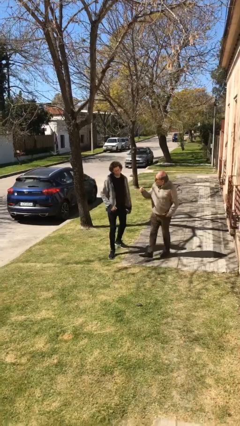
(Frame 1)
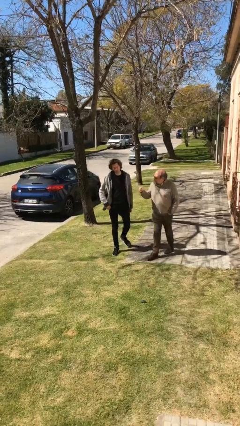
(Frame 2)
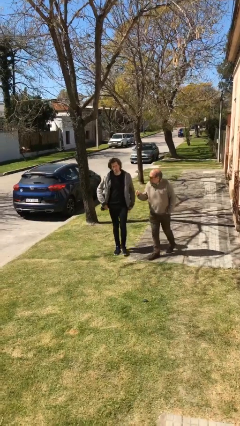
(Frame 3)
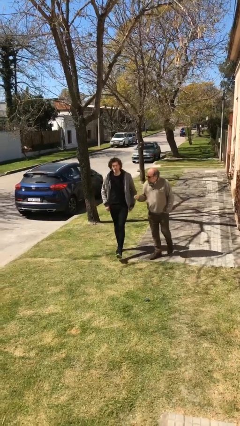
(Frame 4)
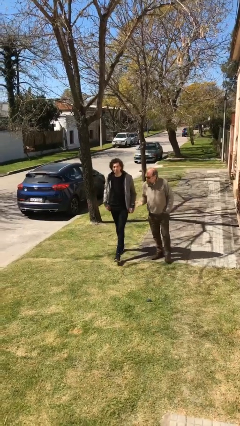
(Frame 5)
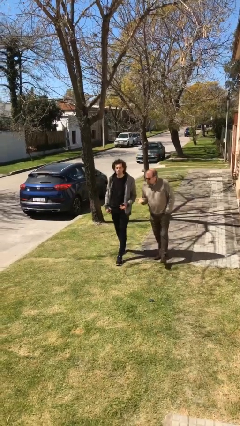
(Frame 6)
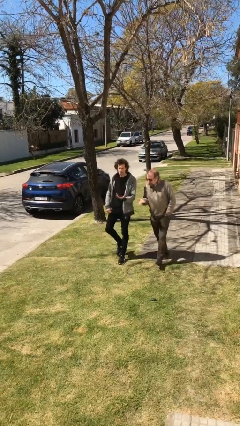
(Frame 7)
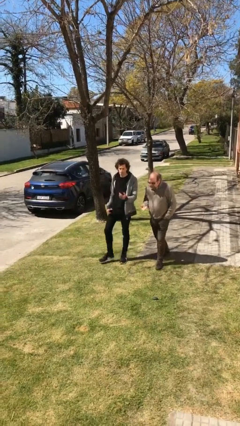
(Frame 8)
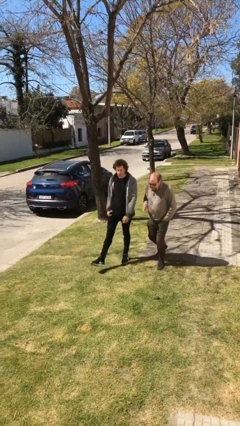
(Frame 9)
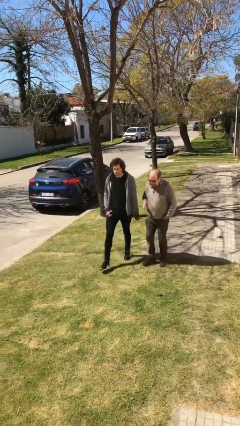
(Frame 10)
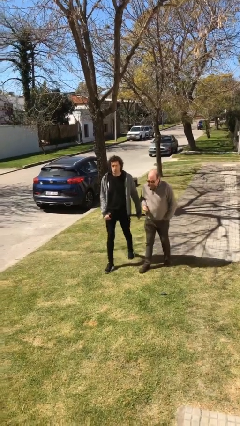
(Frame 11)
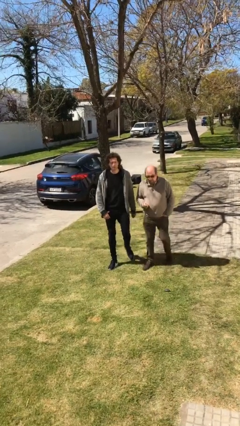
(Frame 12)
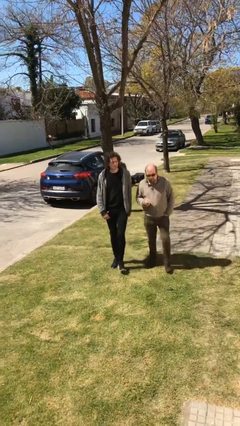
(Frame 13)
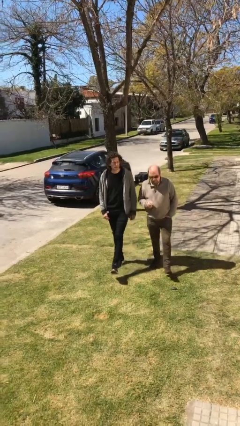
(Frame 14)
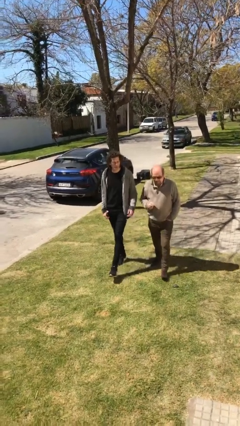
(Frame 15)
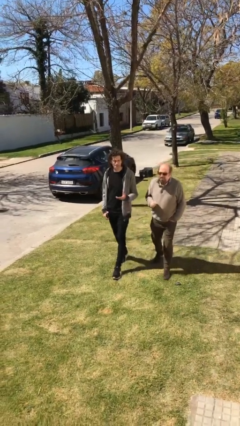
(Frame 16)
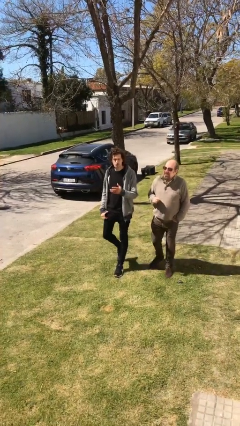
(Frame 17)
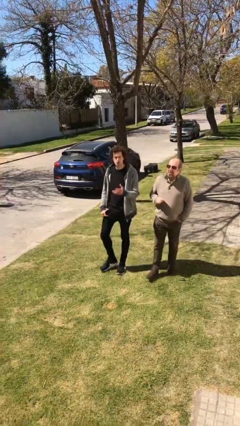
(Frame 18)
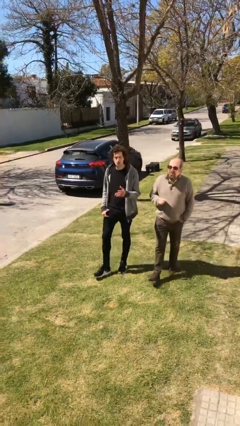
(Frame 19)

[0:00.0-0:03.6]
person talks to person

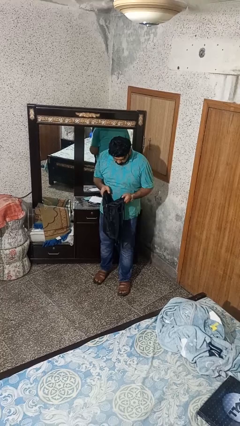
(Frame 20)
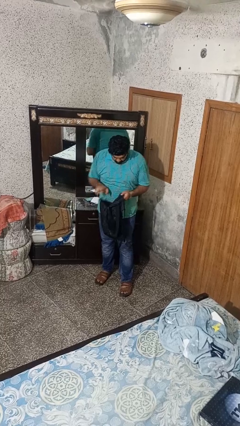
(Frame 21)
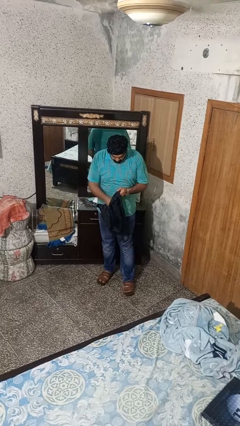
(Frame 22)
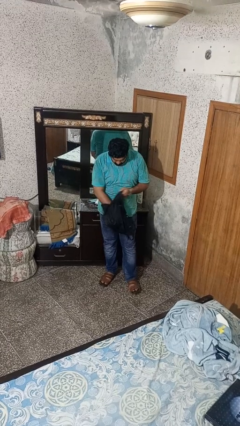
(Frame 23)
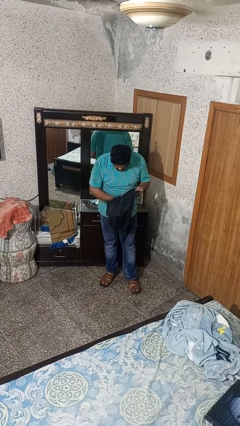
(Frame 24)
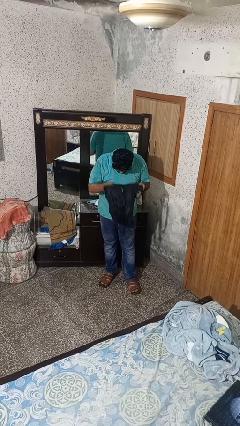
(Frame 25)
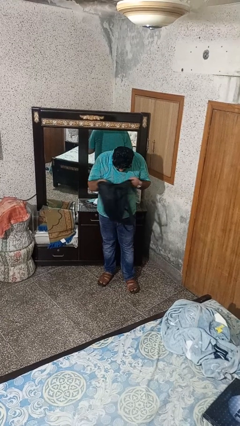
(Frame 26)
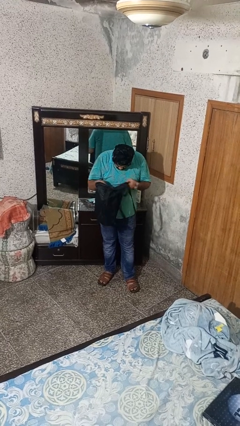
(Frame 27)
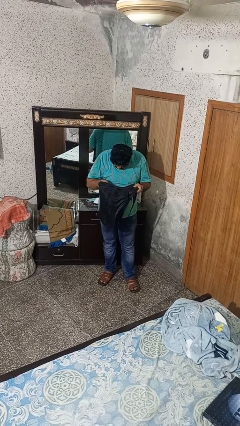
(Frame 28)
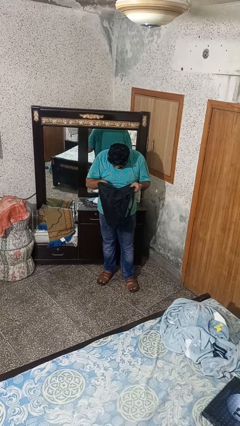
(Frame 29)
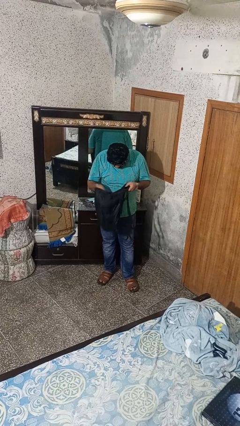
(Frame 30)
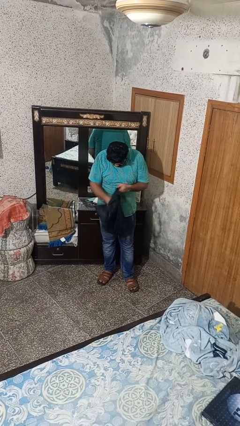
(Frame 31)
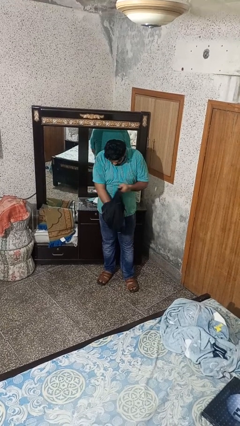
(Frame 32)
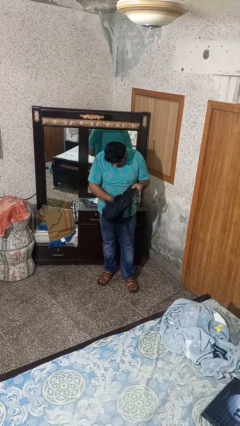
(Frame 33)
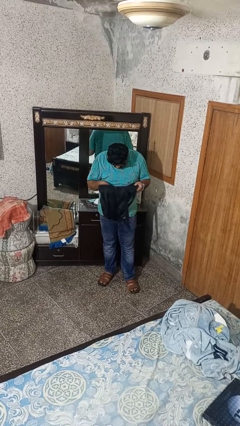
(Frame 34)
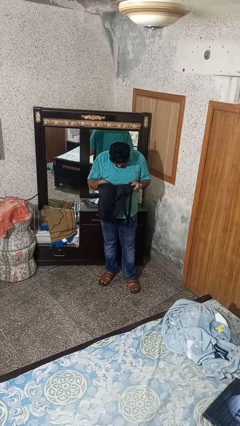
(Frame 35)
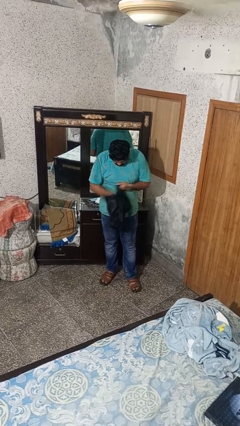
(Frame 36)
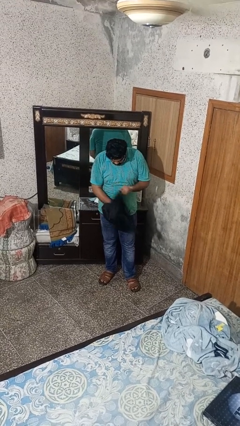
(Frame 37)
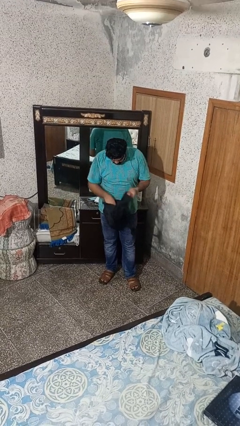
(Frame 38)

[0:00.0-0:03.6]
person searches in backpack

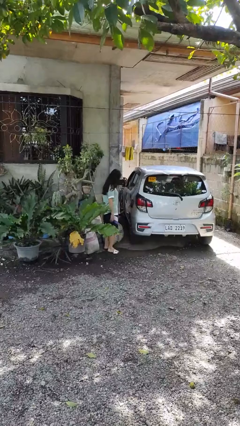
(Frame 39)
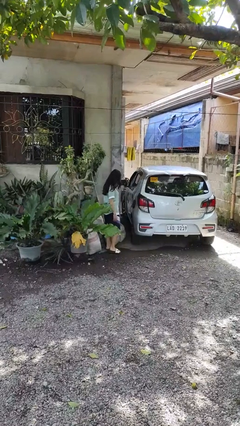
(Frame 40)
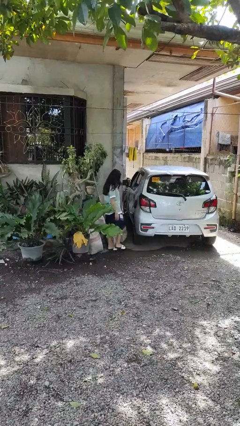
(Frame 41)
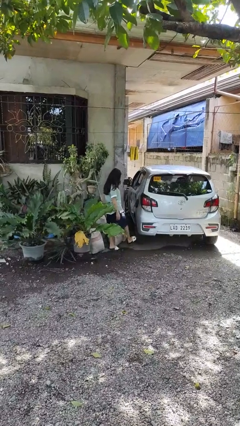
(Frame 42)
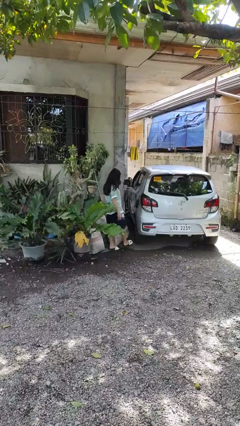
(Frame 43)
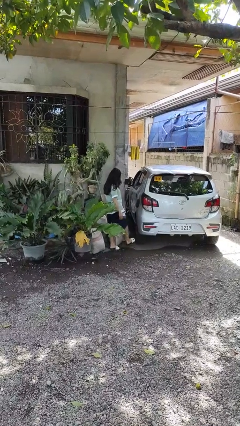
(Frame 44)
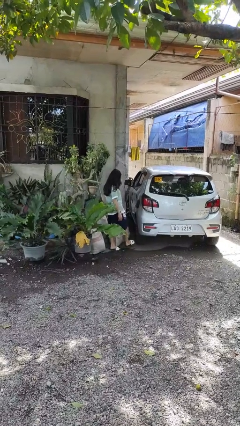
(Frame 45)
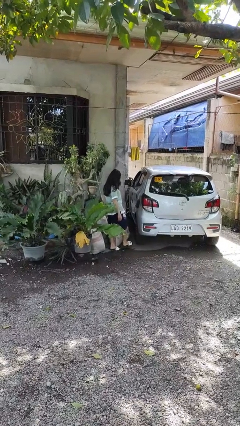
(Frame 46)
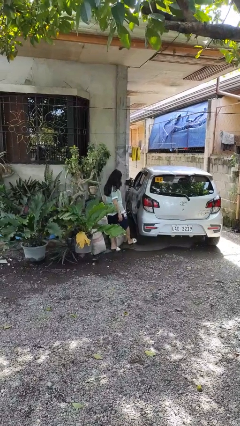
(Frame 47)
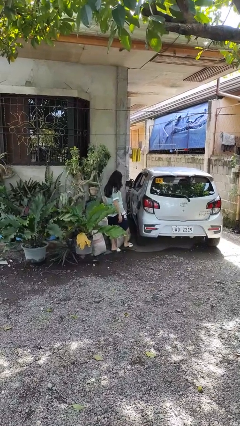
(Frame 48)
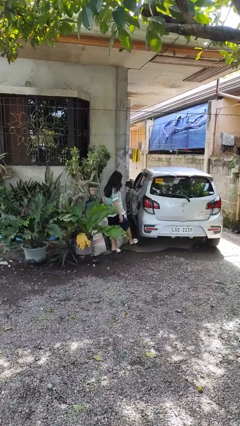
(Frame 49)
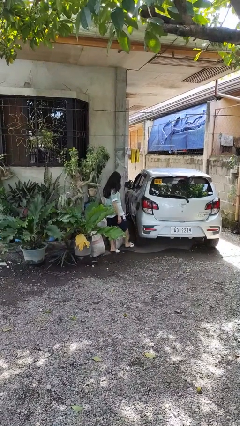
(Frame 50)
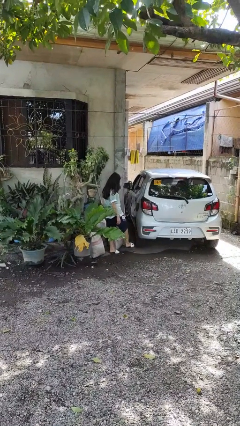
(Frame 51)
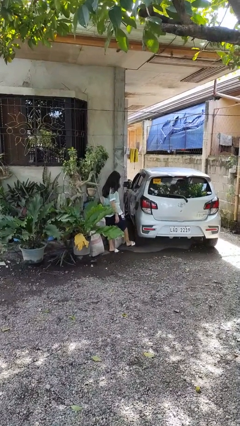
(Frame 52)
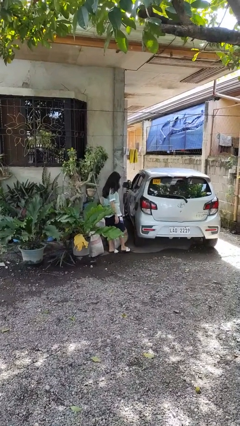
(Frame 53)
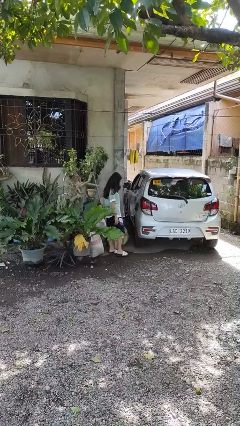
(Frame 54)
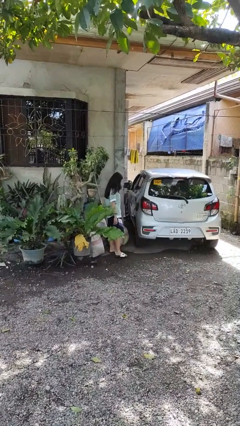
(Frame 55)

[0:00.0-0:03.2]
person kicks car tires

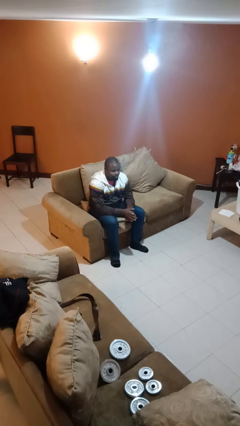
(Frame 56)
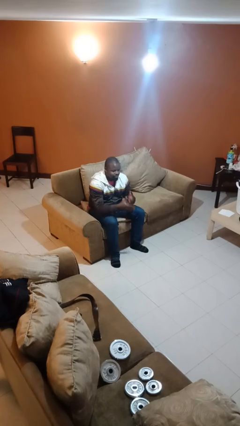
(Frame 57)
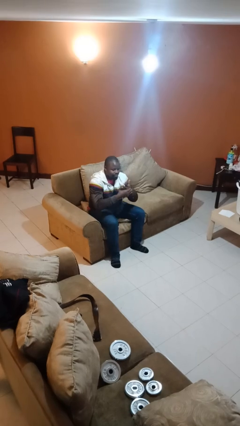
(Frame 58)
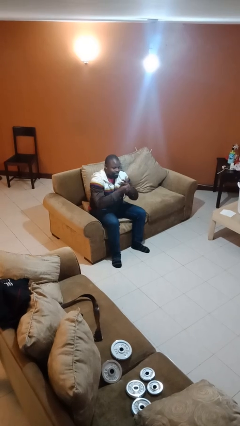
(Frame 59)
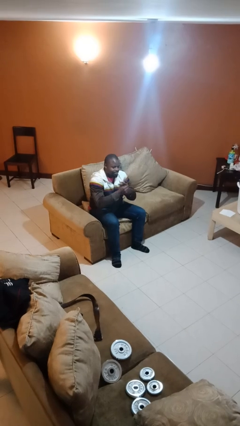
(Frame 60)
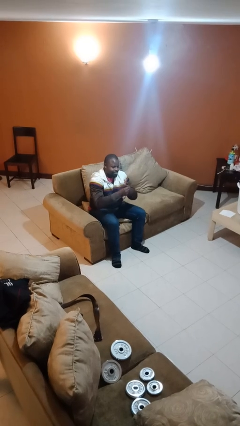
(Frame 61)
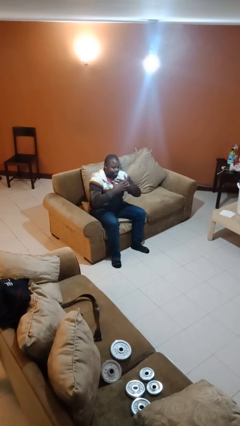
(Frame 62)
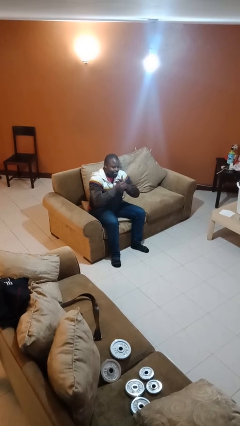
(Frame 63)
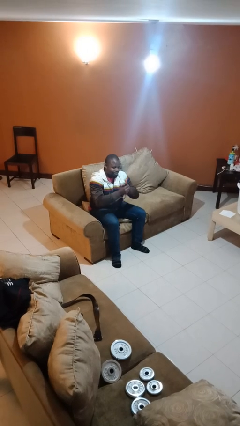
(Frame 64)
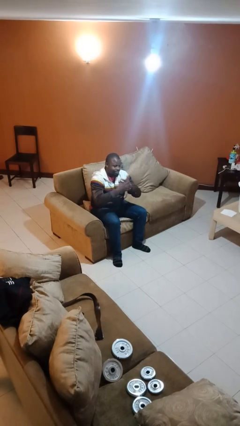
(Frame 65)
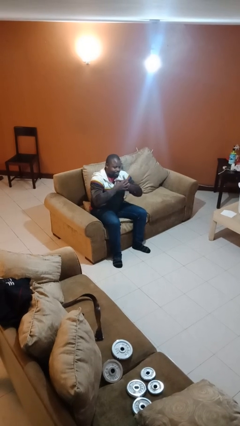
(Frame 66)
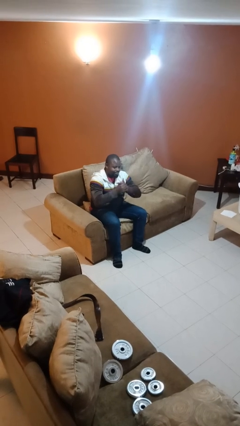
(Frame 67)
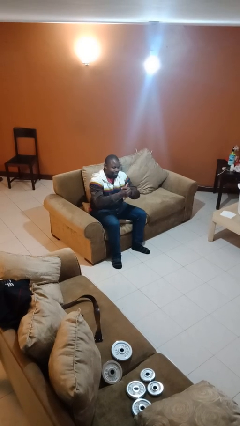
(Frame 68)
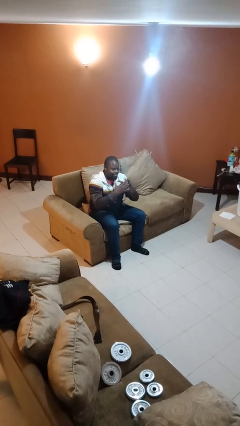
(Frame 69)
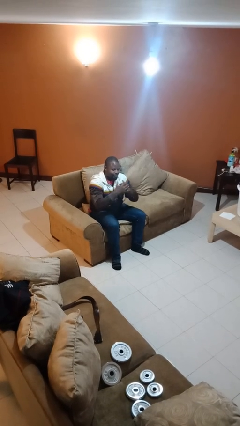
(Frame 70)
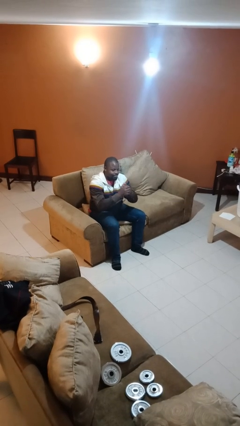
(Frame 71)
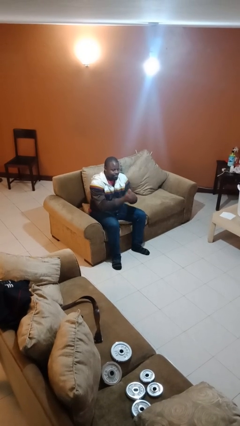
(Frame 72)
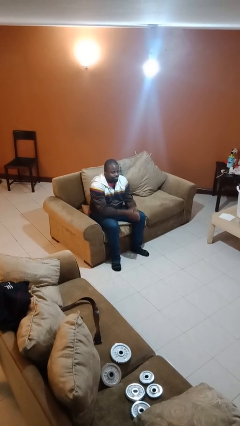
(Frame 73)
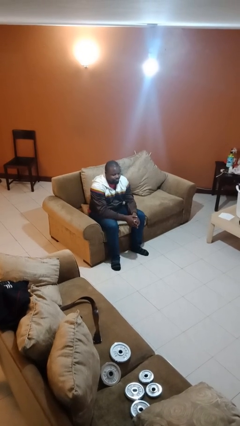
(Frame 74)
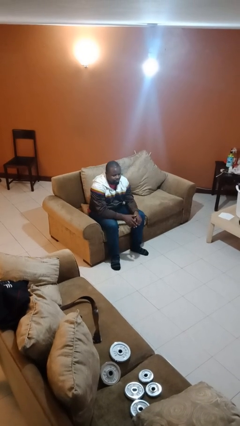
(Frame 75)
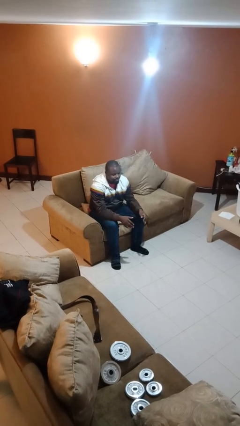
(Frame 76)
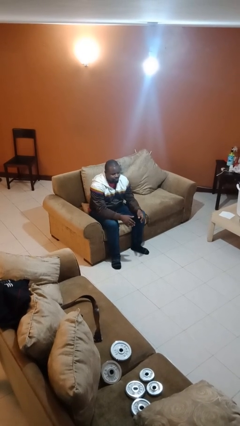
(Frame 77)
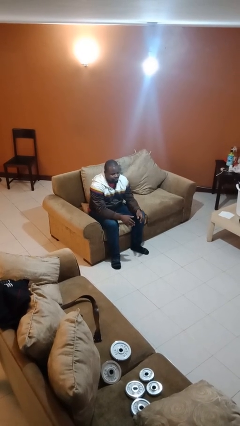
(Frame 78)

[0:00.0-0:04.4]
person cracks knuckles

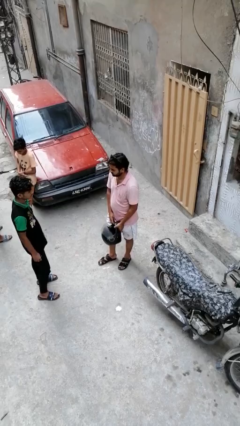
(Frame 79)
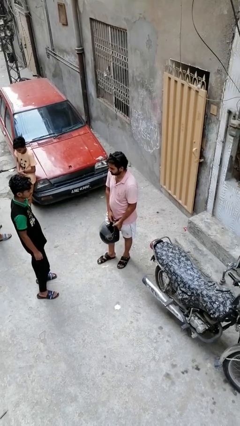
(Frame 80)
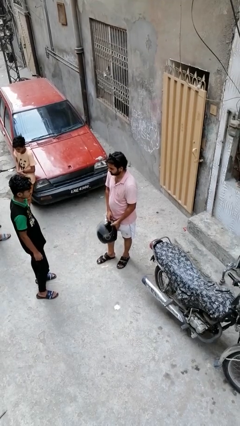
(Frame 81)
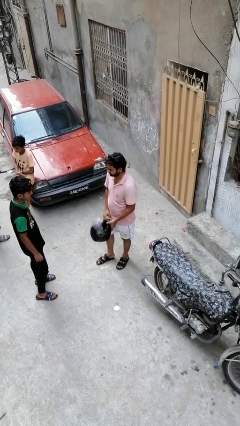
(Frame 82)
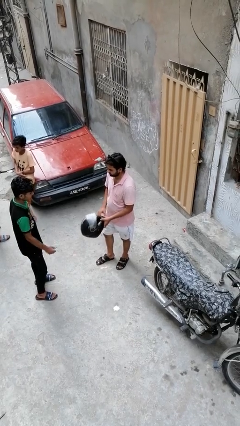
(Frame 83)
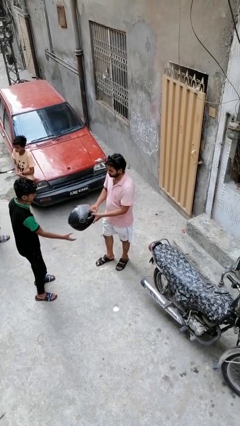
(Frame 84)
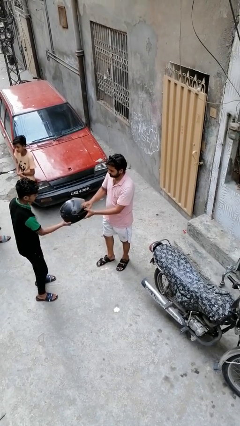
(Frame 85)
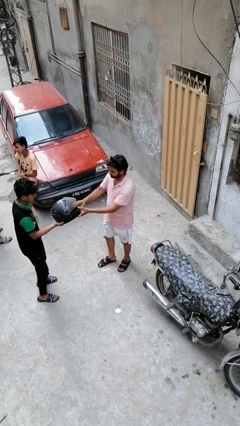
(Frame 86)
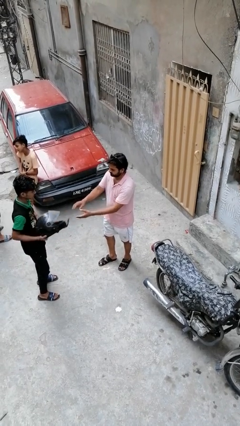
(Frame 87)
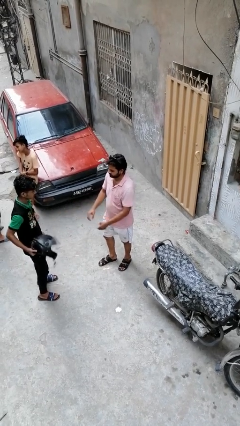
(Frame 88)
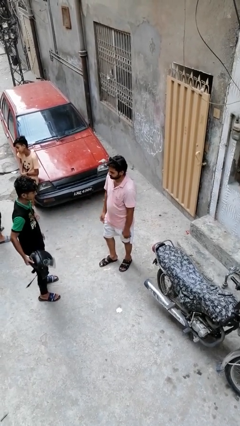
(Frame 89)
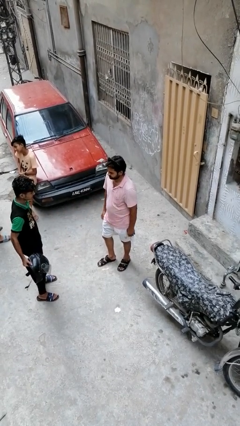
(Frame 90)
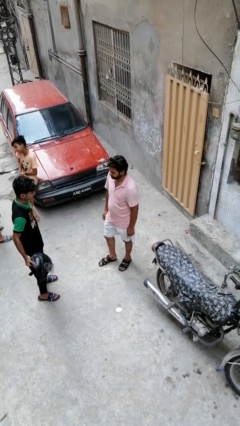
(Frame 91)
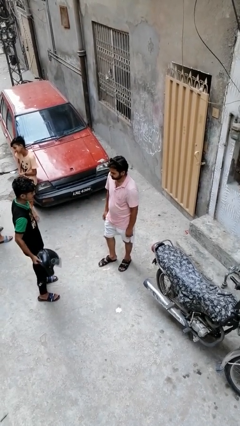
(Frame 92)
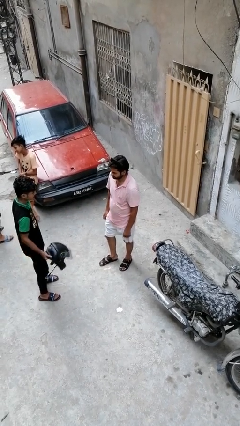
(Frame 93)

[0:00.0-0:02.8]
person transfers object to person
